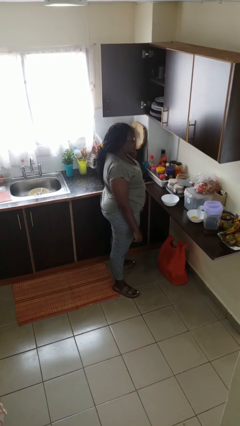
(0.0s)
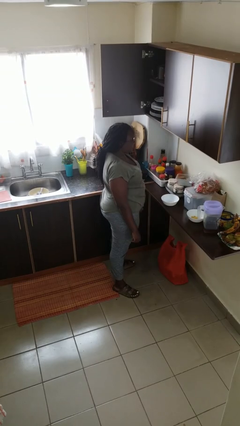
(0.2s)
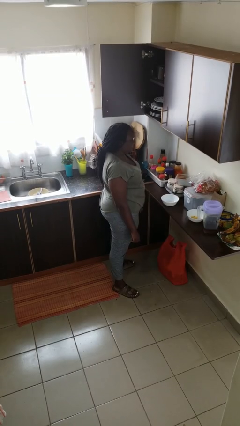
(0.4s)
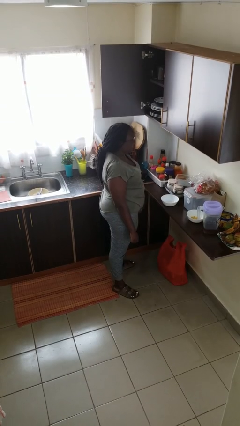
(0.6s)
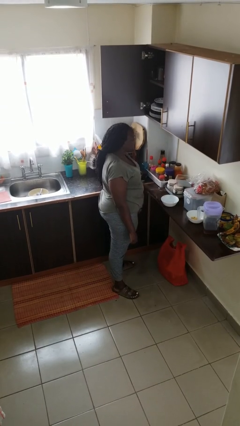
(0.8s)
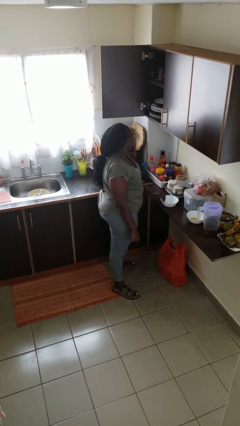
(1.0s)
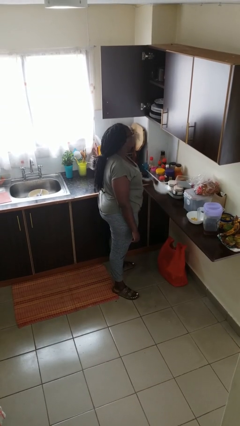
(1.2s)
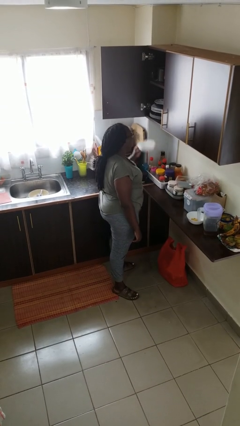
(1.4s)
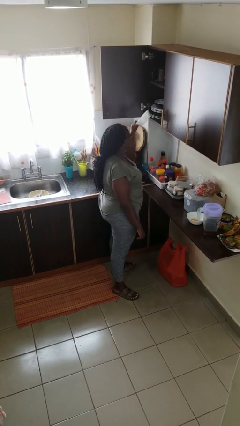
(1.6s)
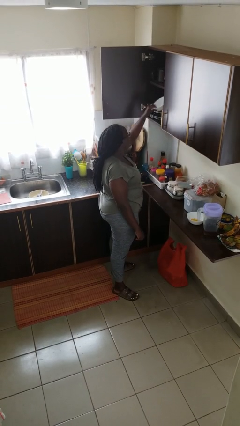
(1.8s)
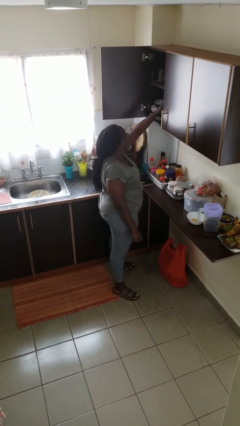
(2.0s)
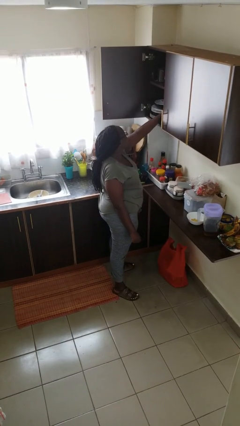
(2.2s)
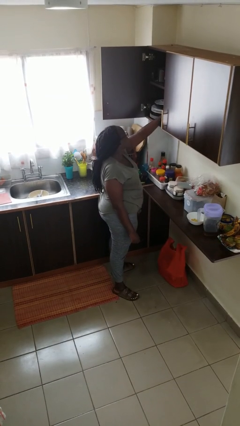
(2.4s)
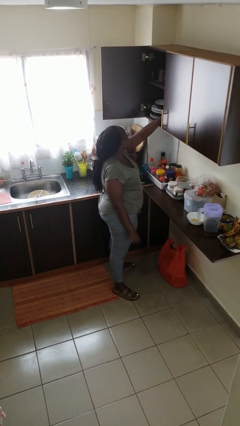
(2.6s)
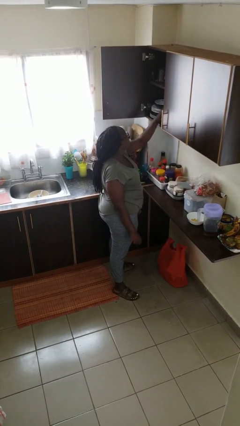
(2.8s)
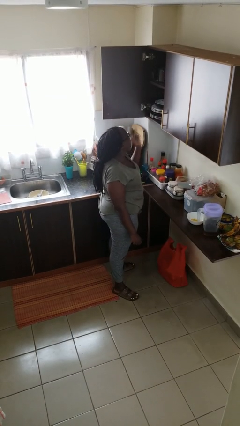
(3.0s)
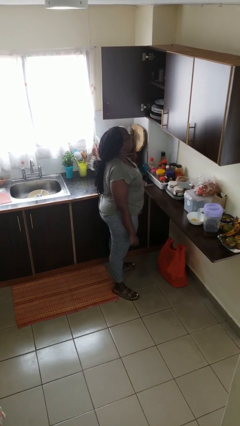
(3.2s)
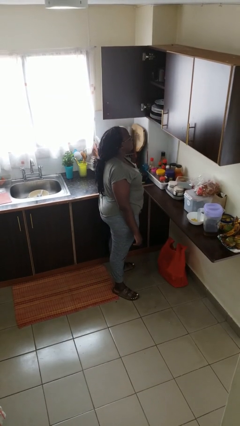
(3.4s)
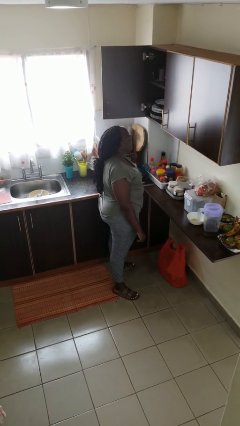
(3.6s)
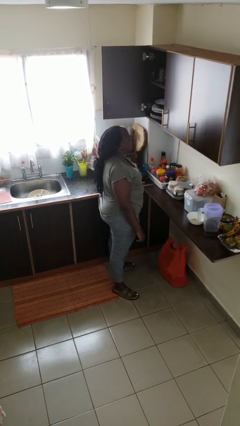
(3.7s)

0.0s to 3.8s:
person puts object in cabinet

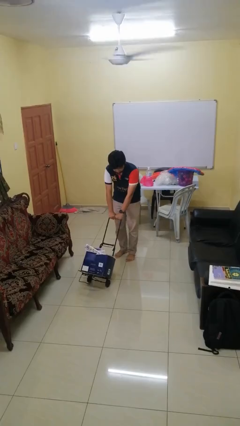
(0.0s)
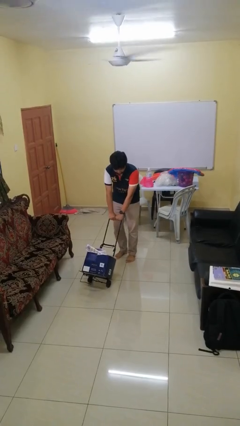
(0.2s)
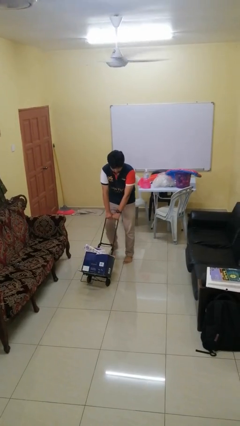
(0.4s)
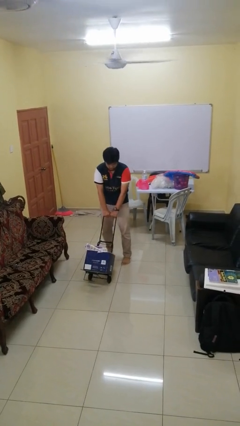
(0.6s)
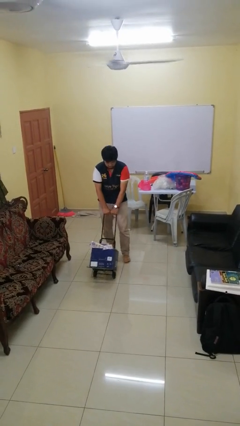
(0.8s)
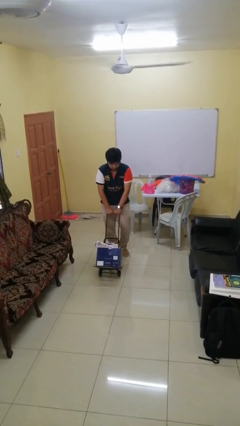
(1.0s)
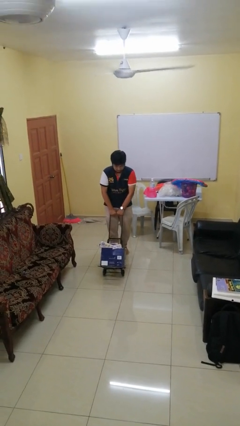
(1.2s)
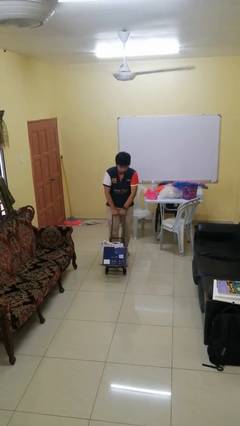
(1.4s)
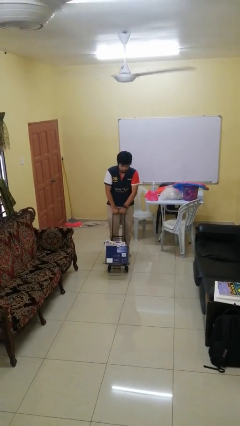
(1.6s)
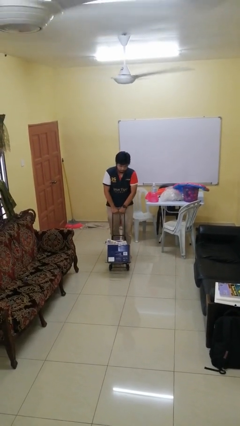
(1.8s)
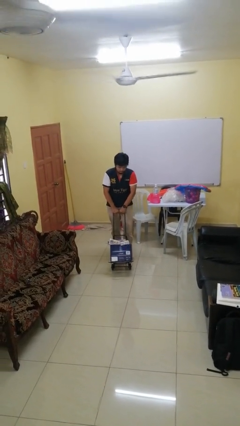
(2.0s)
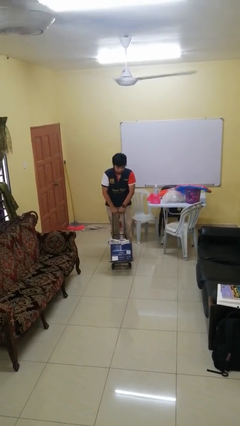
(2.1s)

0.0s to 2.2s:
person pulls wheeled cart

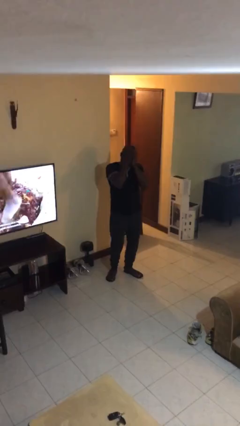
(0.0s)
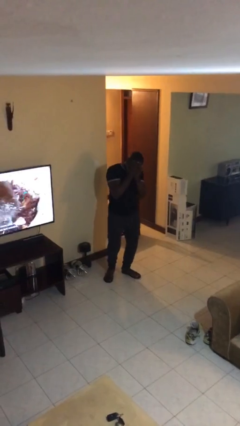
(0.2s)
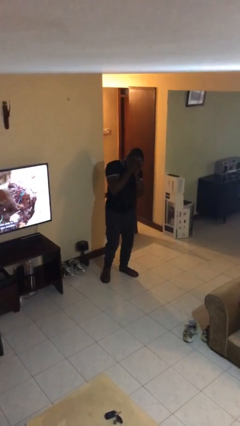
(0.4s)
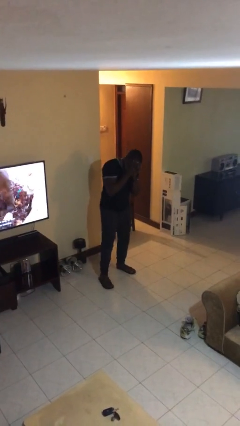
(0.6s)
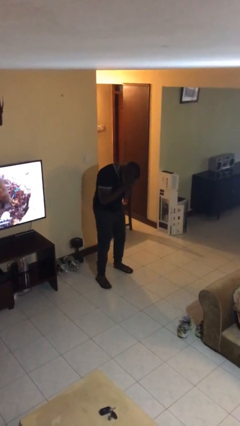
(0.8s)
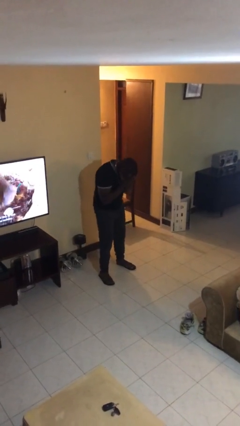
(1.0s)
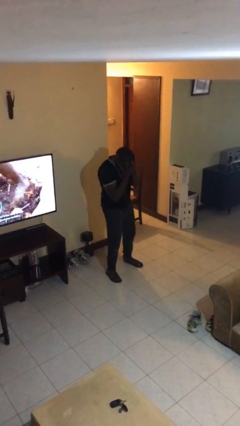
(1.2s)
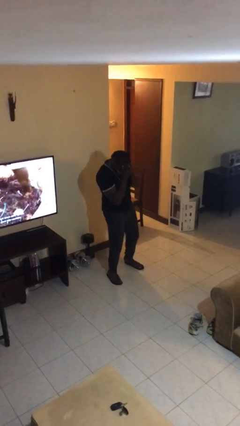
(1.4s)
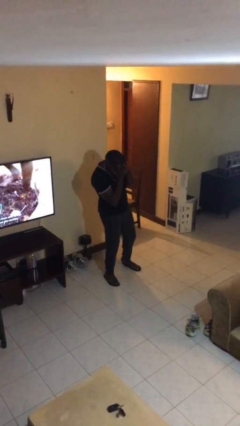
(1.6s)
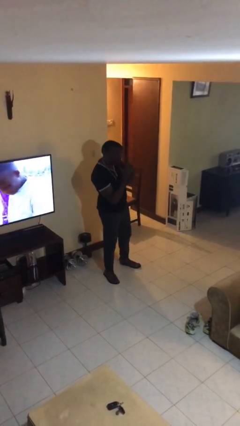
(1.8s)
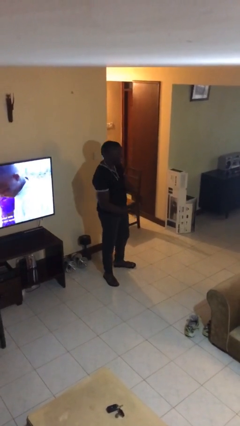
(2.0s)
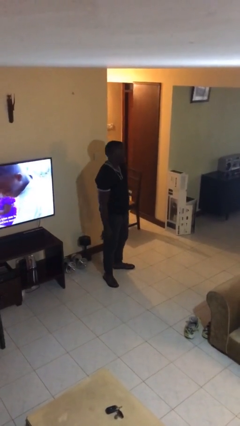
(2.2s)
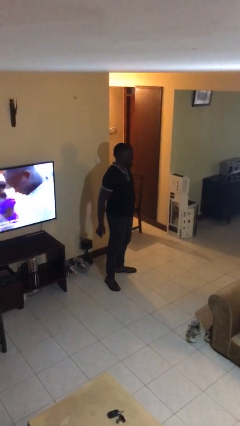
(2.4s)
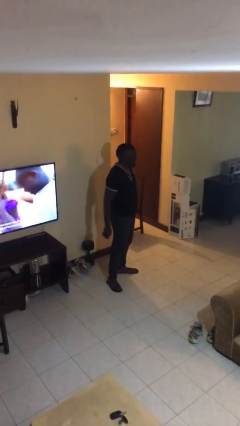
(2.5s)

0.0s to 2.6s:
person covers face with hands

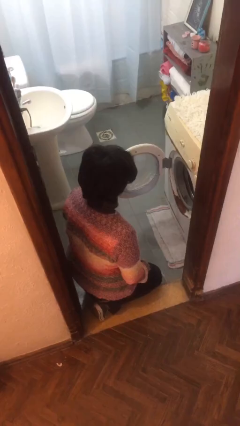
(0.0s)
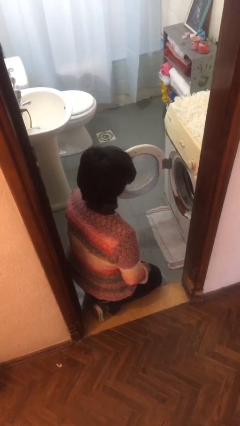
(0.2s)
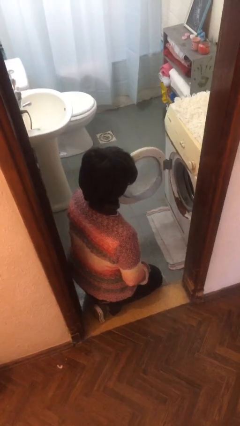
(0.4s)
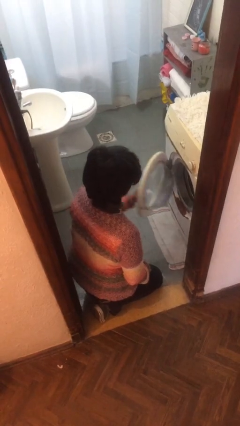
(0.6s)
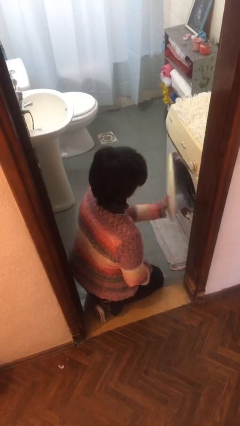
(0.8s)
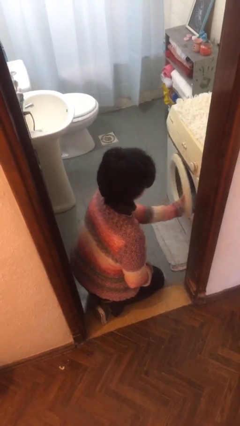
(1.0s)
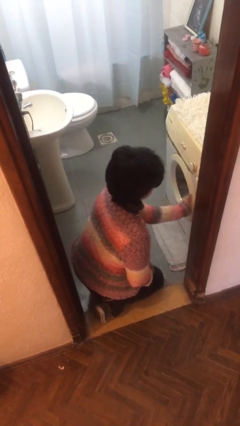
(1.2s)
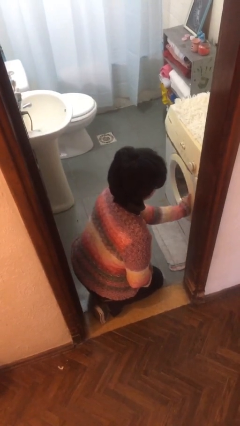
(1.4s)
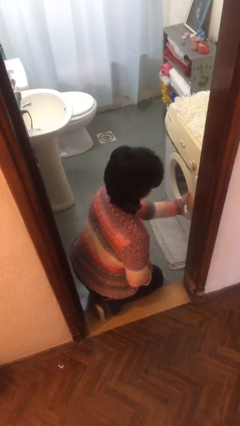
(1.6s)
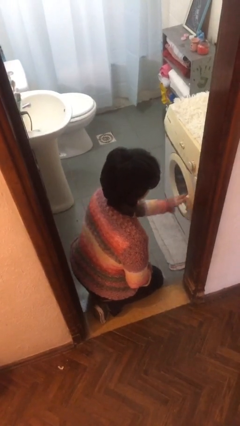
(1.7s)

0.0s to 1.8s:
person closes clothes washer

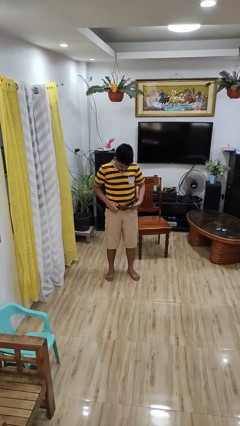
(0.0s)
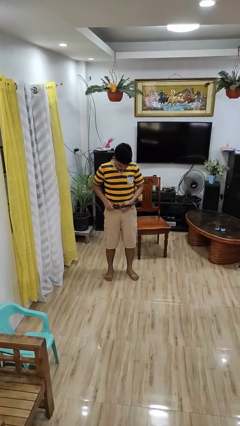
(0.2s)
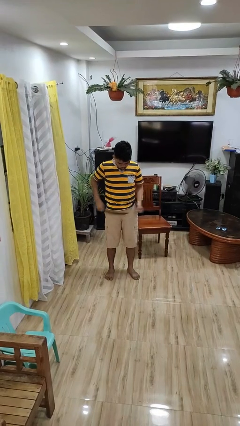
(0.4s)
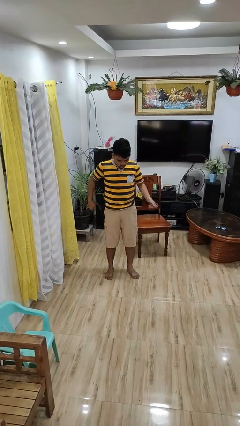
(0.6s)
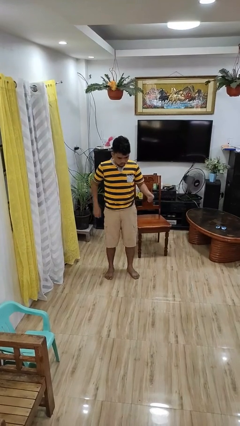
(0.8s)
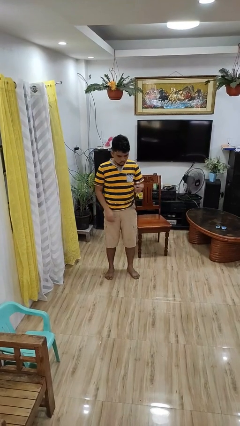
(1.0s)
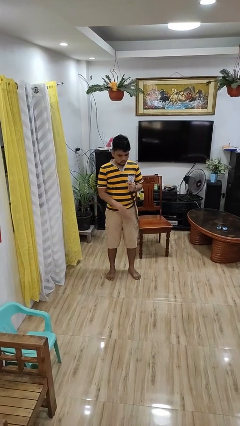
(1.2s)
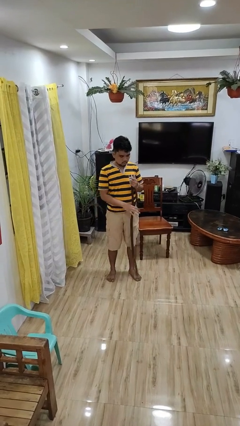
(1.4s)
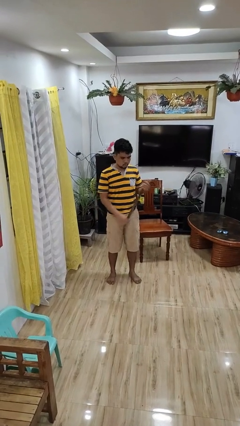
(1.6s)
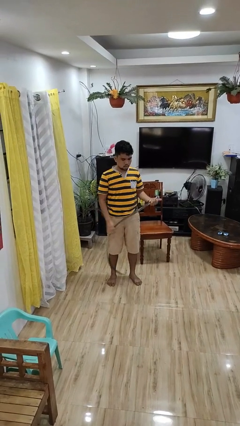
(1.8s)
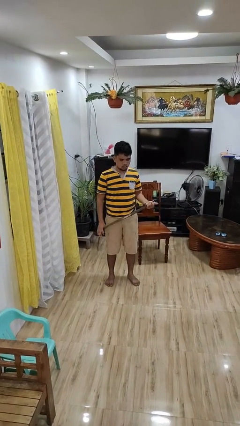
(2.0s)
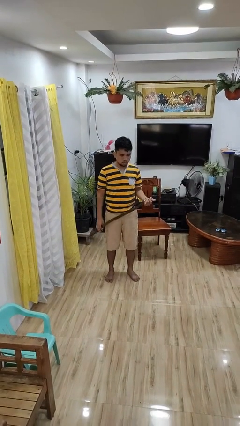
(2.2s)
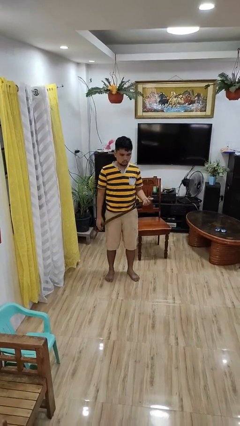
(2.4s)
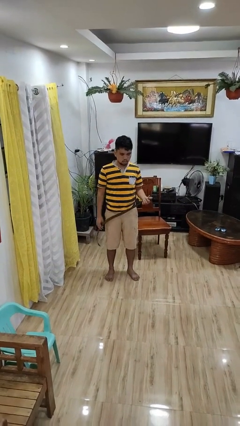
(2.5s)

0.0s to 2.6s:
person takes off belt

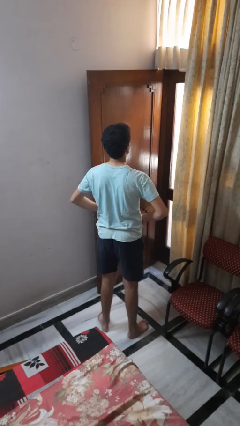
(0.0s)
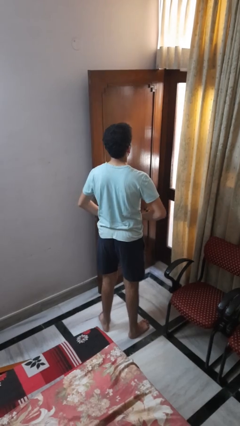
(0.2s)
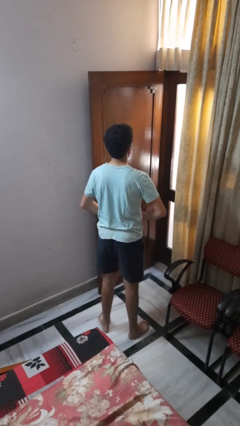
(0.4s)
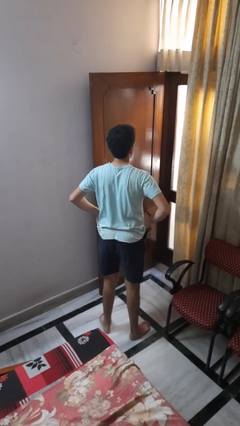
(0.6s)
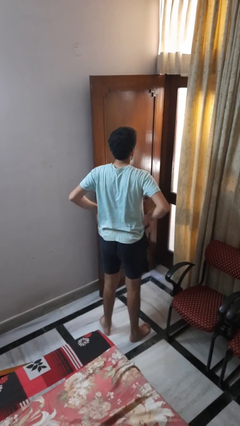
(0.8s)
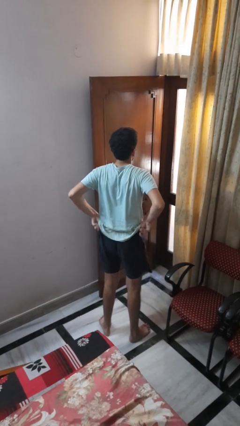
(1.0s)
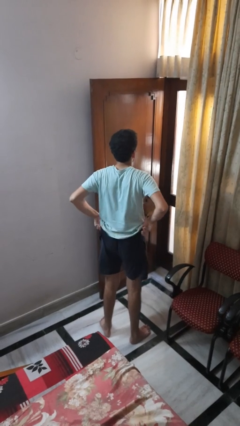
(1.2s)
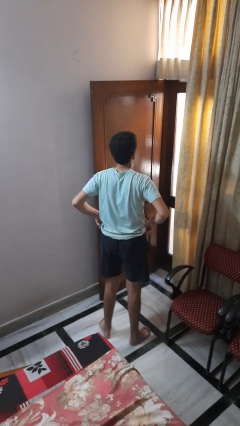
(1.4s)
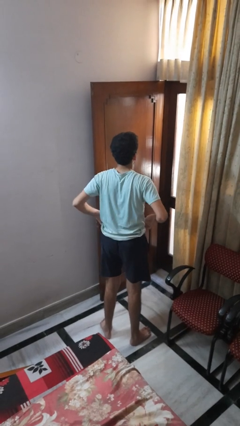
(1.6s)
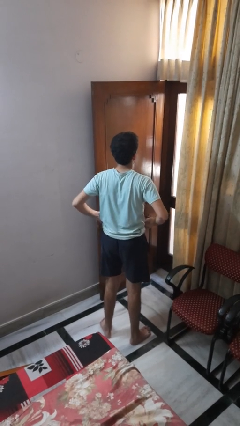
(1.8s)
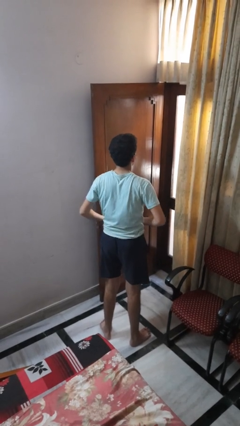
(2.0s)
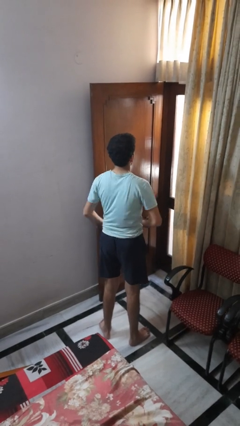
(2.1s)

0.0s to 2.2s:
person hikes up pants

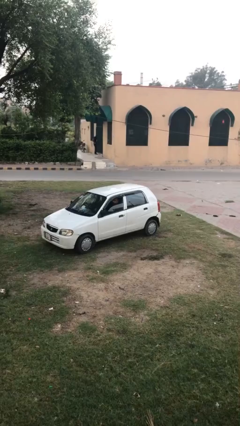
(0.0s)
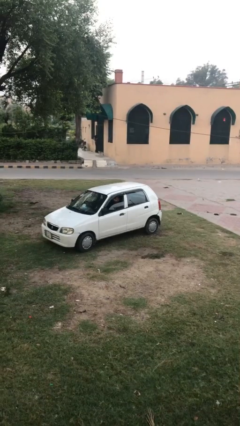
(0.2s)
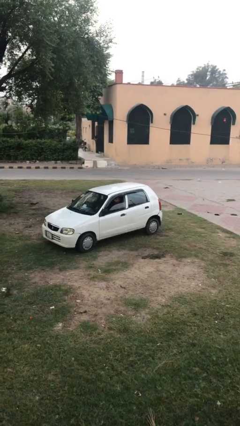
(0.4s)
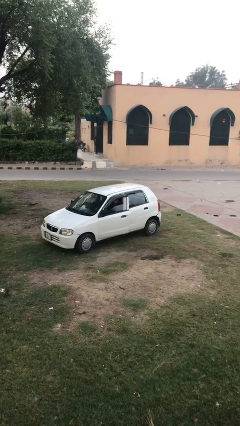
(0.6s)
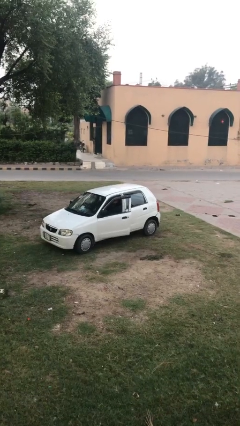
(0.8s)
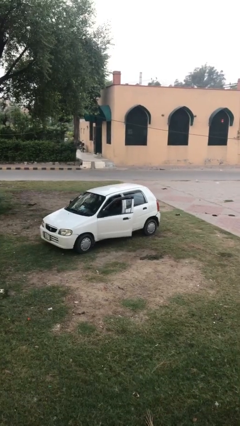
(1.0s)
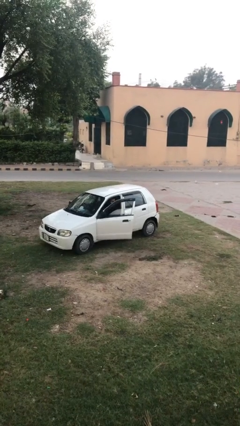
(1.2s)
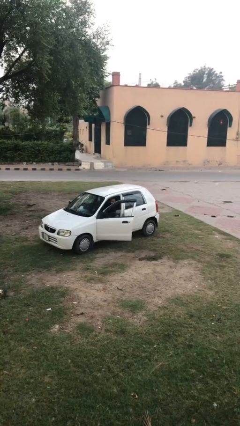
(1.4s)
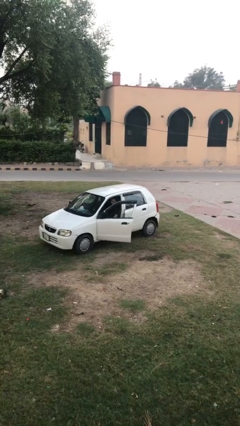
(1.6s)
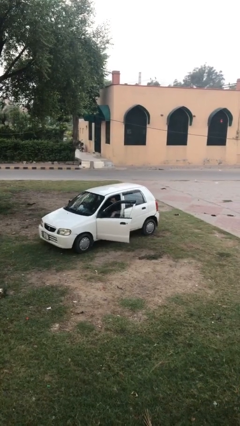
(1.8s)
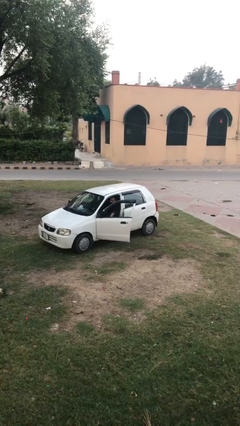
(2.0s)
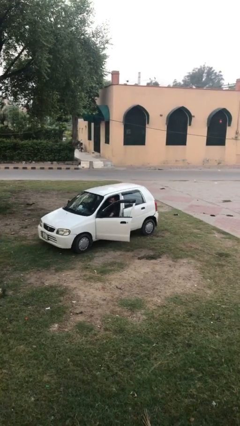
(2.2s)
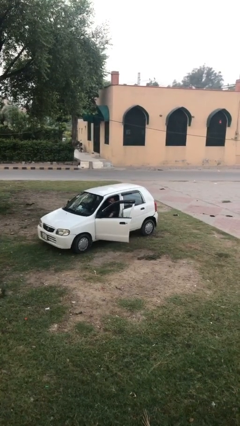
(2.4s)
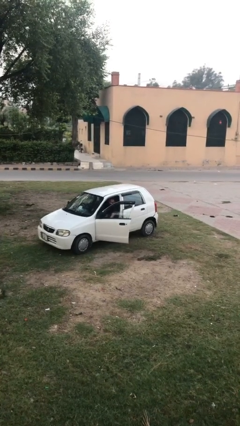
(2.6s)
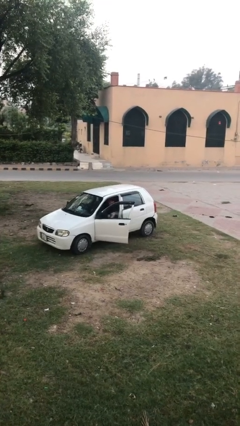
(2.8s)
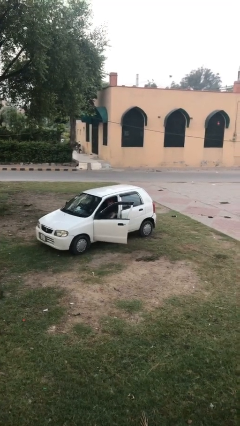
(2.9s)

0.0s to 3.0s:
person opens car door
